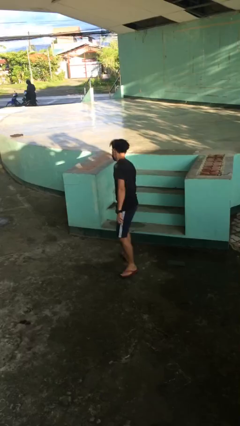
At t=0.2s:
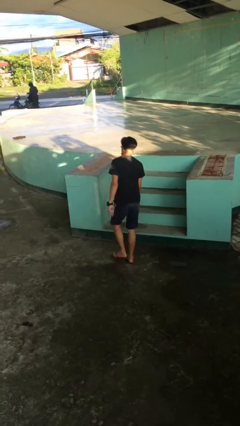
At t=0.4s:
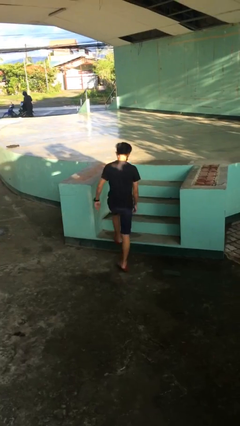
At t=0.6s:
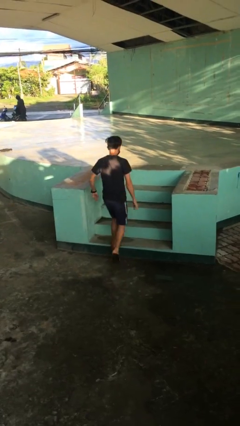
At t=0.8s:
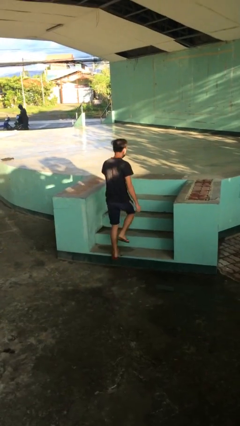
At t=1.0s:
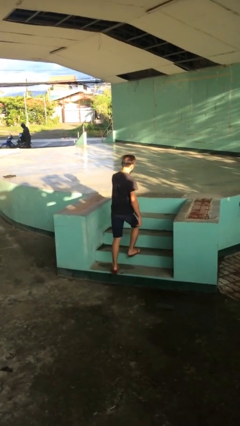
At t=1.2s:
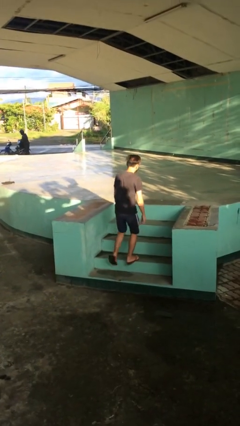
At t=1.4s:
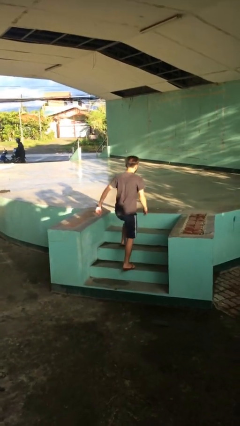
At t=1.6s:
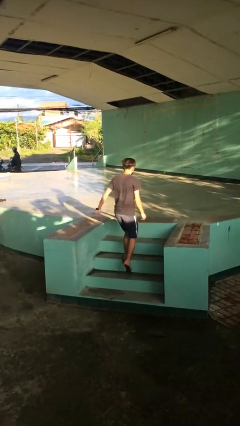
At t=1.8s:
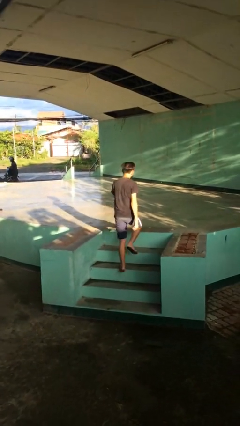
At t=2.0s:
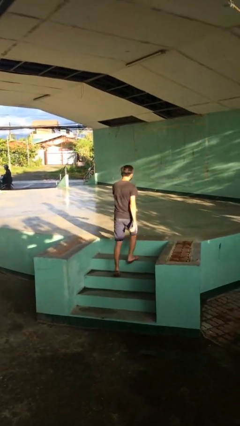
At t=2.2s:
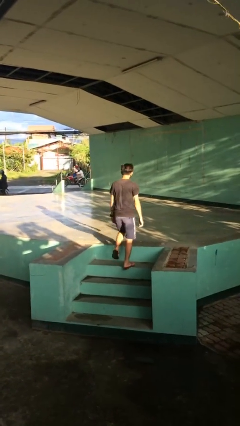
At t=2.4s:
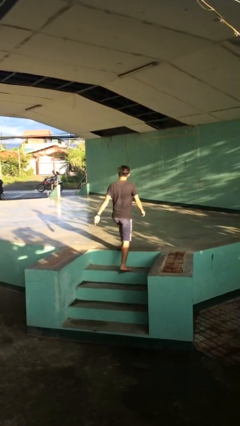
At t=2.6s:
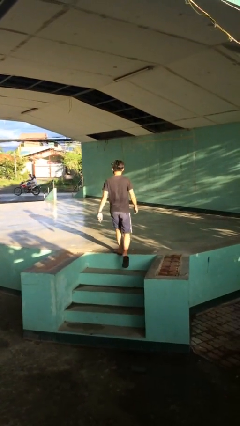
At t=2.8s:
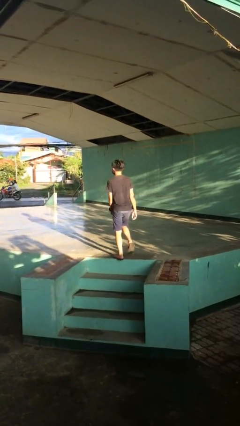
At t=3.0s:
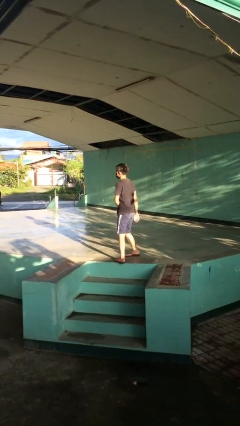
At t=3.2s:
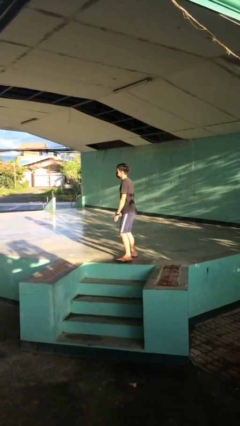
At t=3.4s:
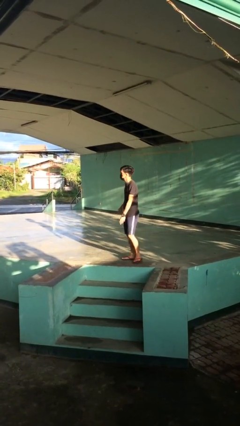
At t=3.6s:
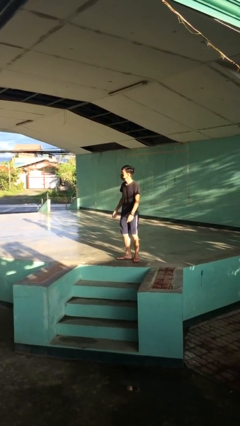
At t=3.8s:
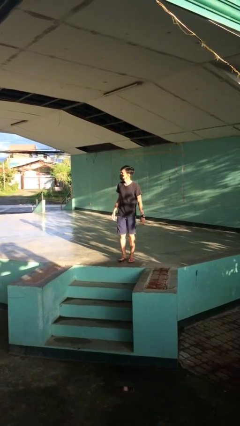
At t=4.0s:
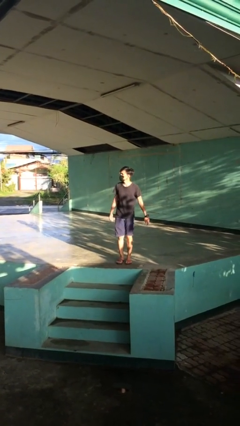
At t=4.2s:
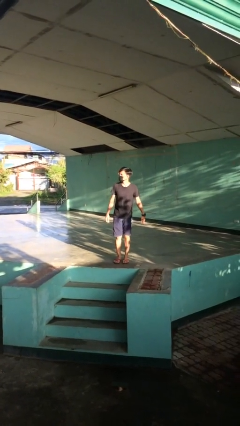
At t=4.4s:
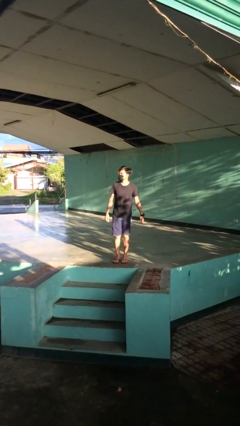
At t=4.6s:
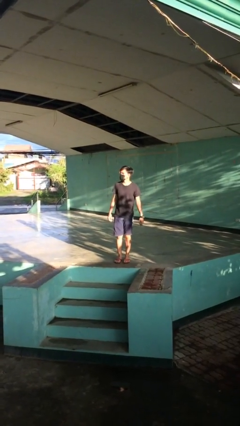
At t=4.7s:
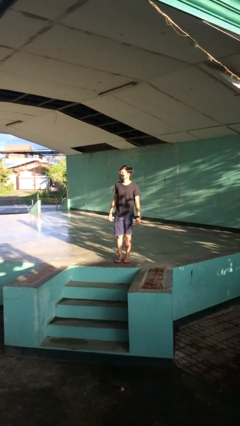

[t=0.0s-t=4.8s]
person climbs up stairs

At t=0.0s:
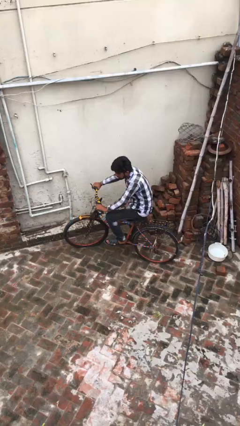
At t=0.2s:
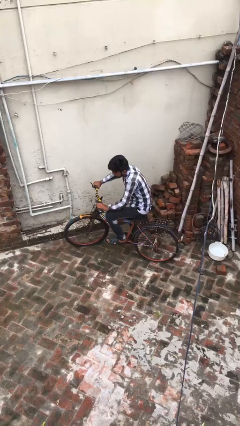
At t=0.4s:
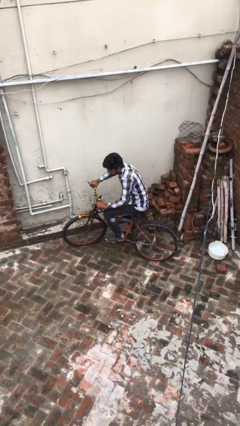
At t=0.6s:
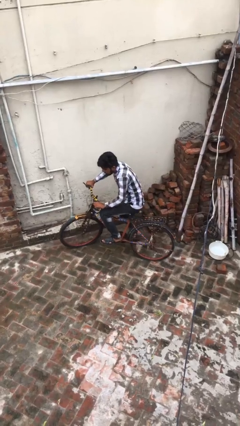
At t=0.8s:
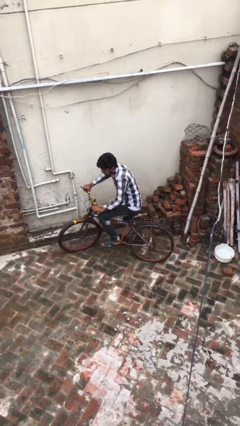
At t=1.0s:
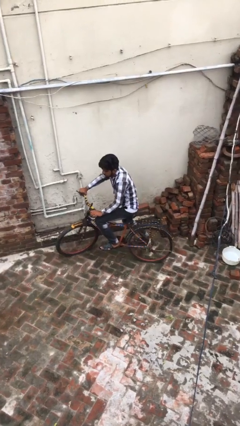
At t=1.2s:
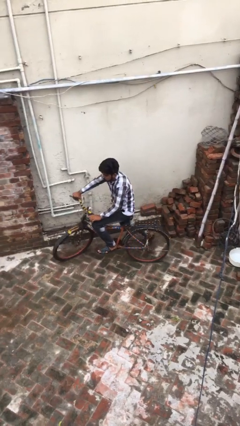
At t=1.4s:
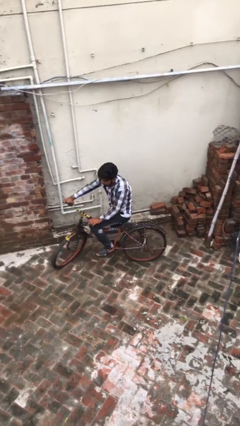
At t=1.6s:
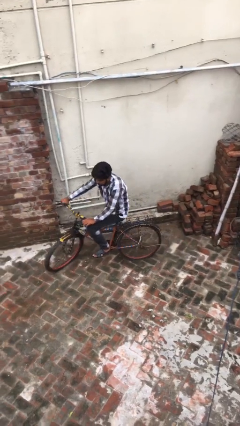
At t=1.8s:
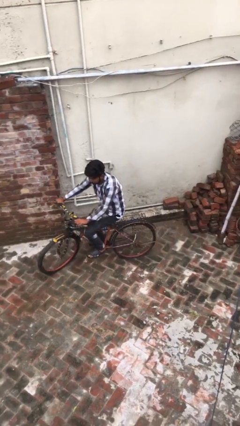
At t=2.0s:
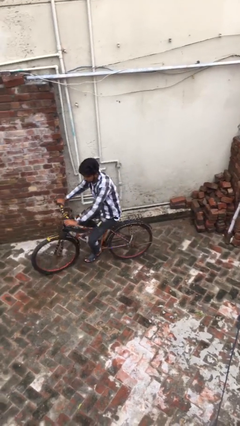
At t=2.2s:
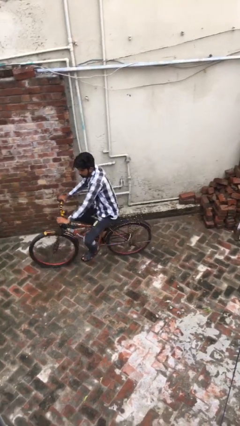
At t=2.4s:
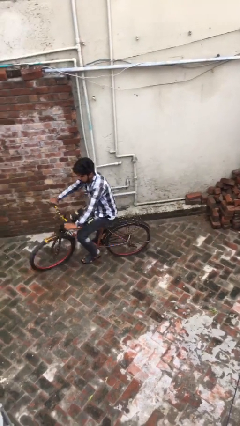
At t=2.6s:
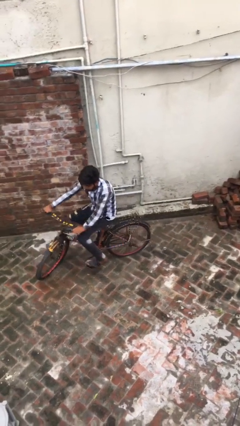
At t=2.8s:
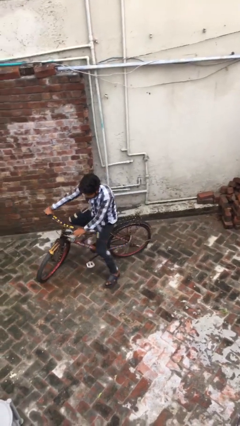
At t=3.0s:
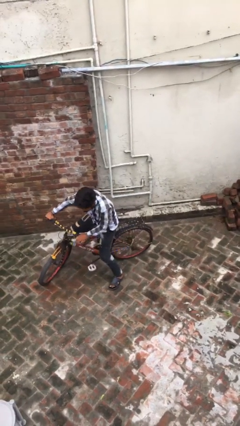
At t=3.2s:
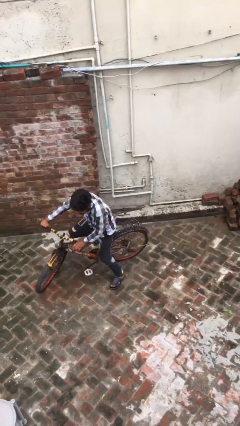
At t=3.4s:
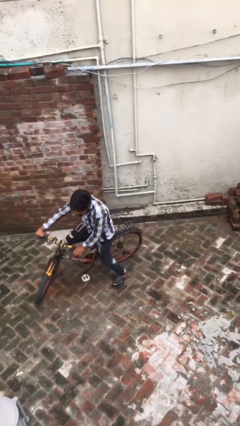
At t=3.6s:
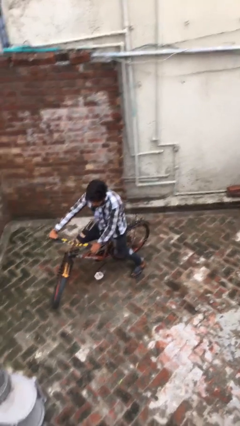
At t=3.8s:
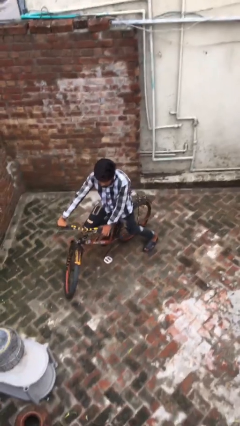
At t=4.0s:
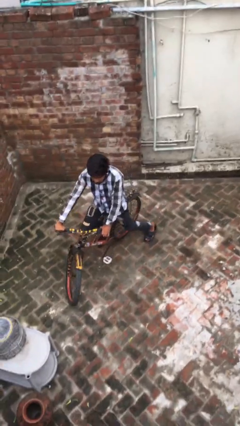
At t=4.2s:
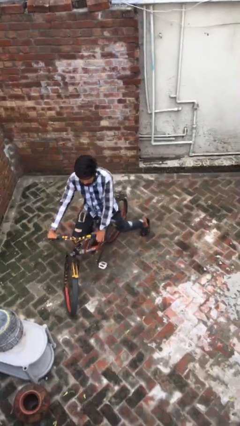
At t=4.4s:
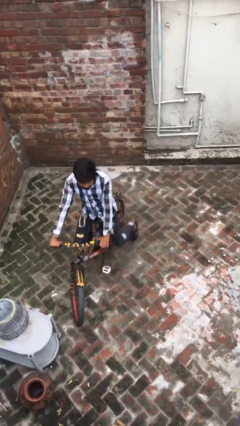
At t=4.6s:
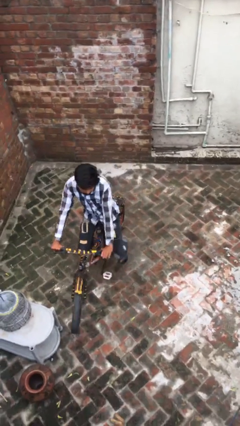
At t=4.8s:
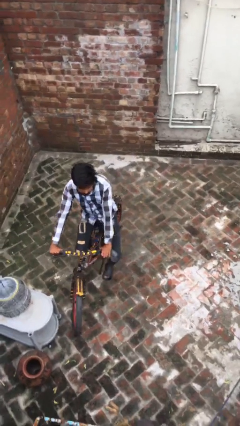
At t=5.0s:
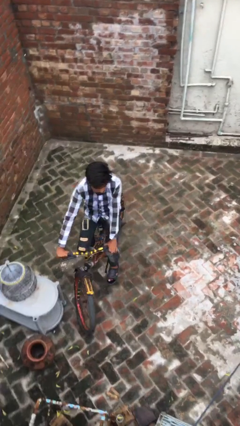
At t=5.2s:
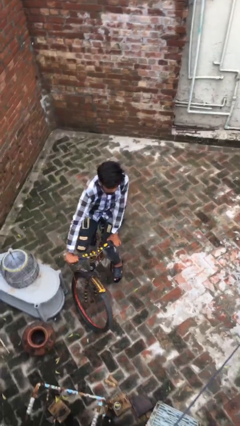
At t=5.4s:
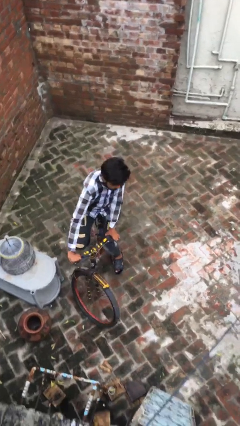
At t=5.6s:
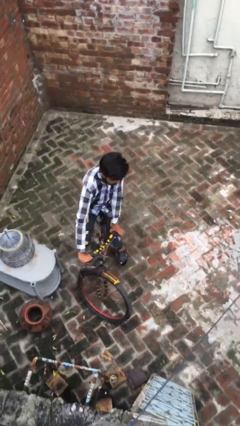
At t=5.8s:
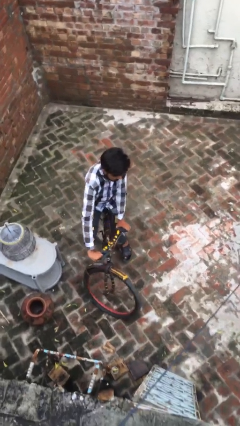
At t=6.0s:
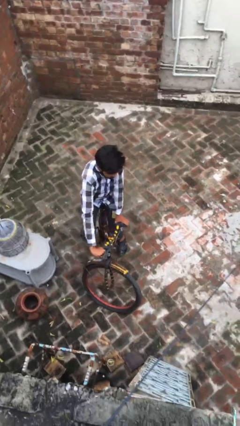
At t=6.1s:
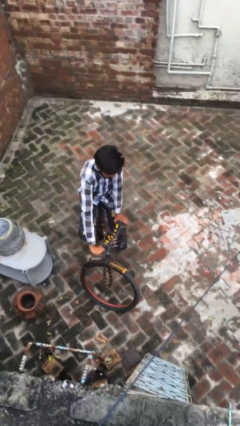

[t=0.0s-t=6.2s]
person rides bicycle

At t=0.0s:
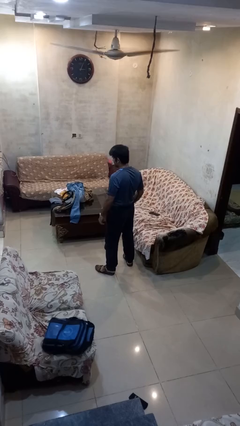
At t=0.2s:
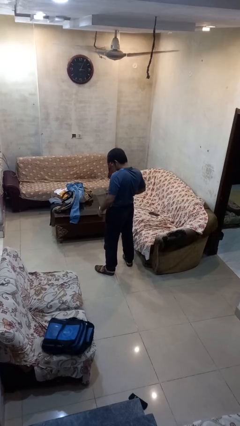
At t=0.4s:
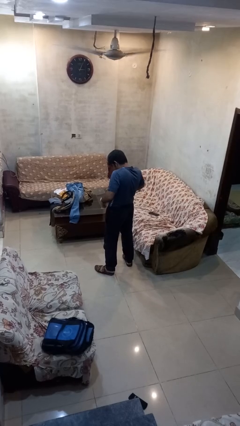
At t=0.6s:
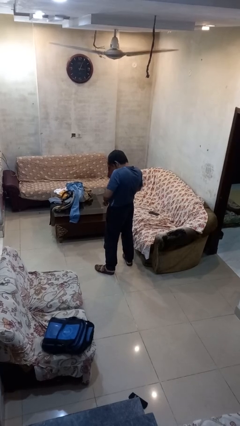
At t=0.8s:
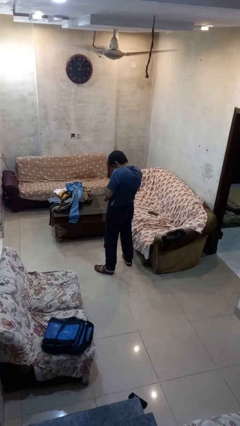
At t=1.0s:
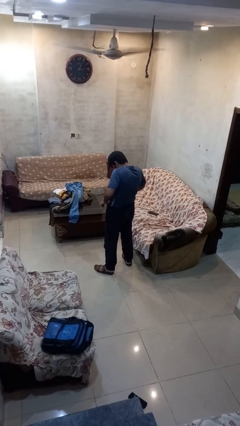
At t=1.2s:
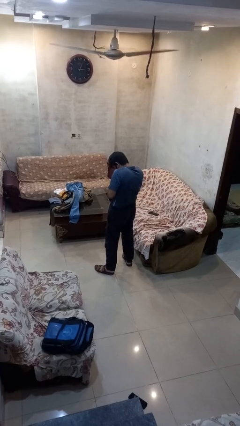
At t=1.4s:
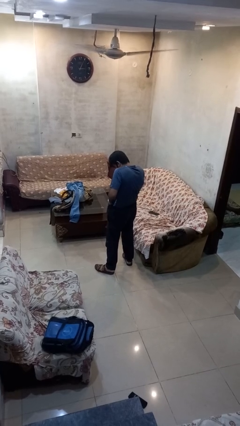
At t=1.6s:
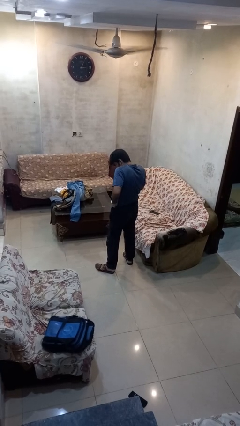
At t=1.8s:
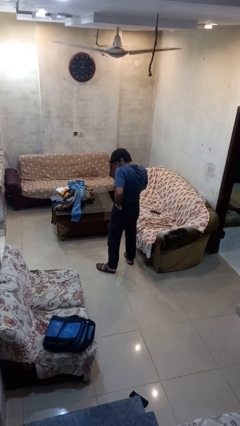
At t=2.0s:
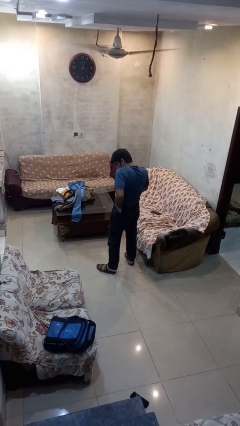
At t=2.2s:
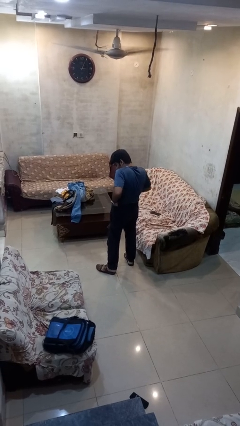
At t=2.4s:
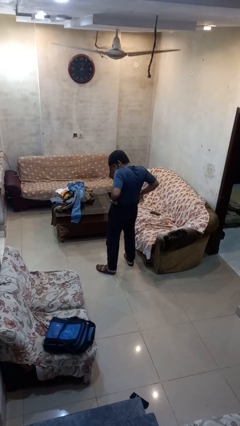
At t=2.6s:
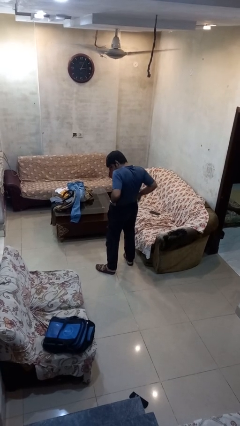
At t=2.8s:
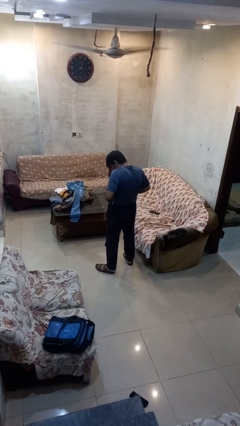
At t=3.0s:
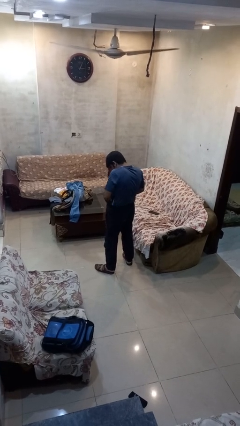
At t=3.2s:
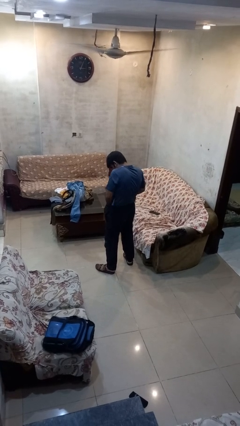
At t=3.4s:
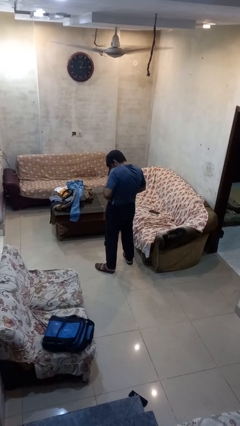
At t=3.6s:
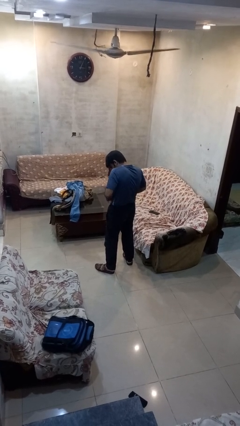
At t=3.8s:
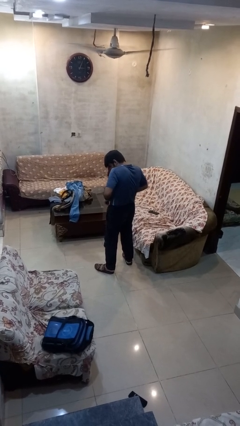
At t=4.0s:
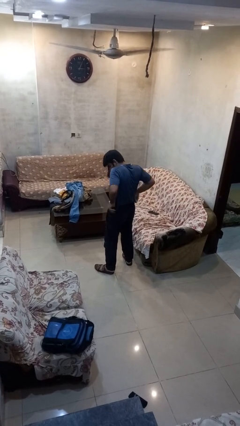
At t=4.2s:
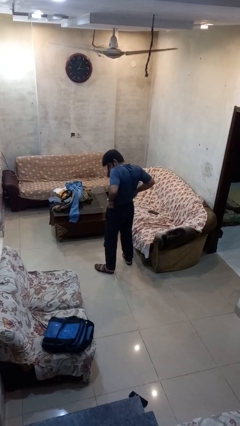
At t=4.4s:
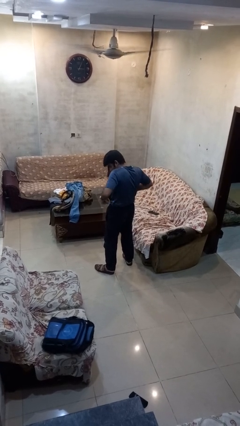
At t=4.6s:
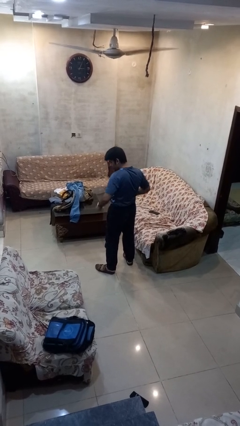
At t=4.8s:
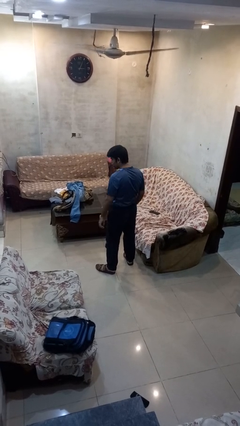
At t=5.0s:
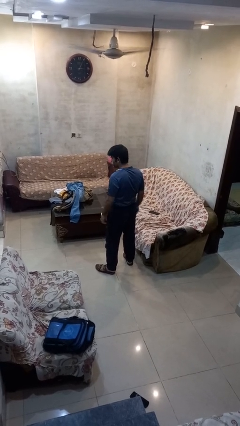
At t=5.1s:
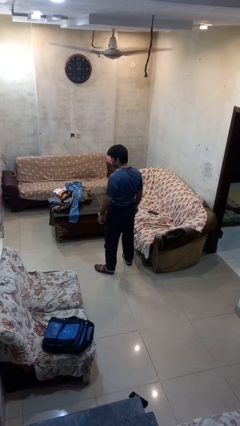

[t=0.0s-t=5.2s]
person hikes up pants

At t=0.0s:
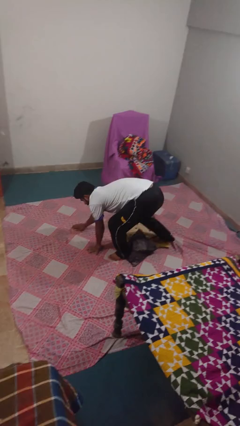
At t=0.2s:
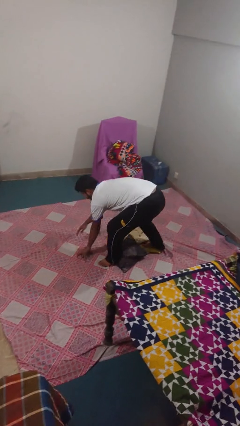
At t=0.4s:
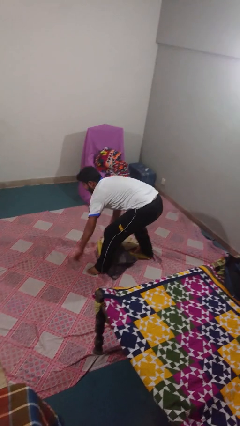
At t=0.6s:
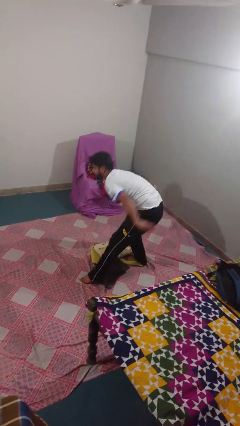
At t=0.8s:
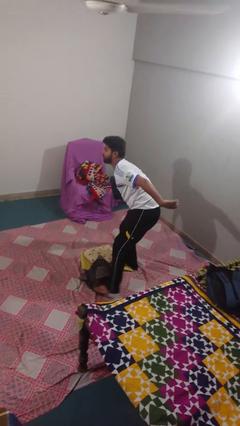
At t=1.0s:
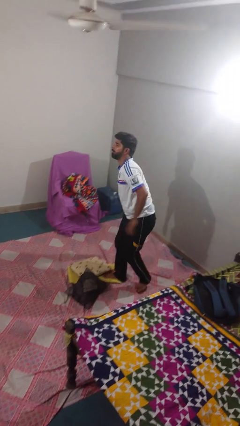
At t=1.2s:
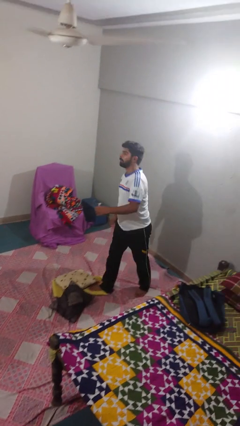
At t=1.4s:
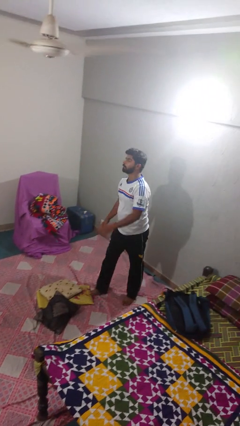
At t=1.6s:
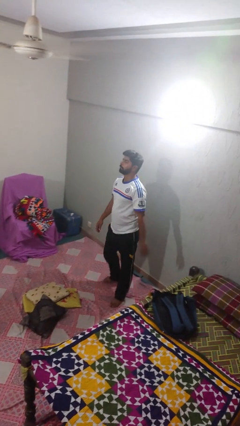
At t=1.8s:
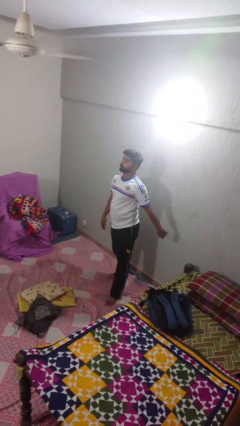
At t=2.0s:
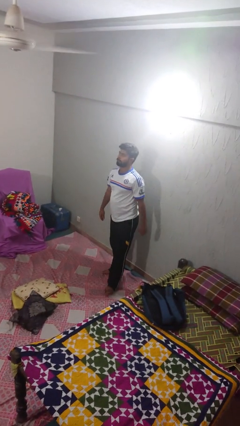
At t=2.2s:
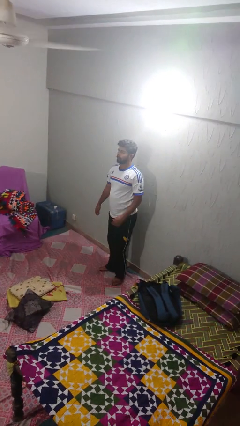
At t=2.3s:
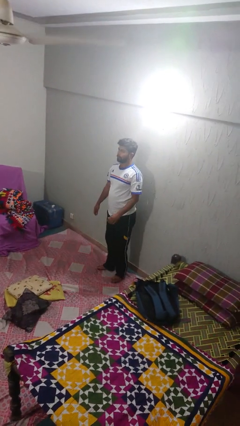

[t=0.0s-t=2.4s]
person stands up from floor
